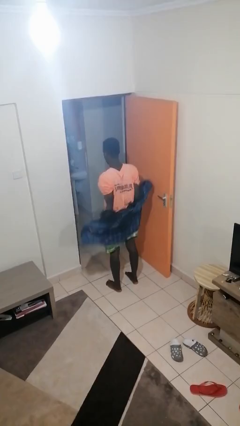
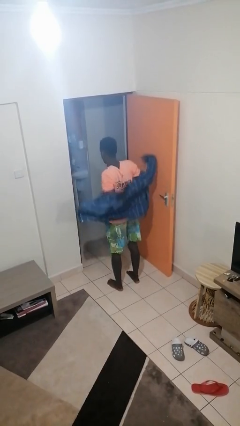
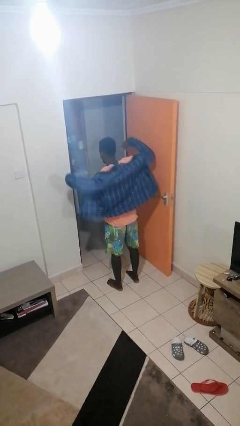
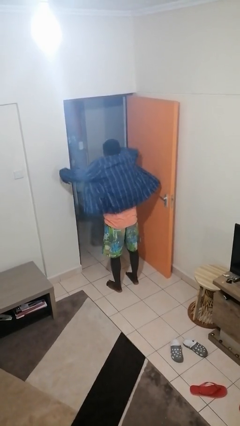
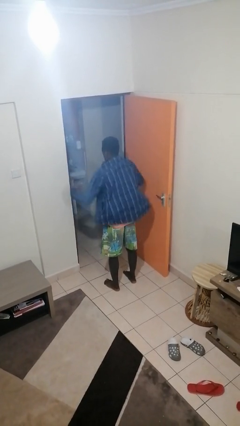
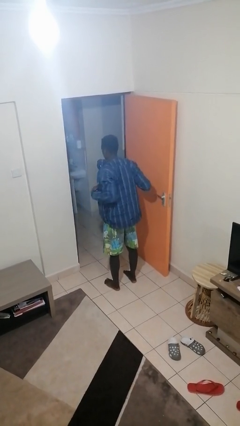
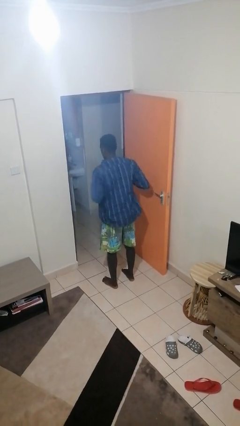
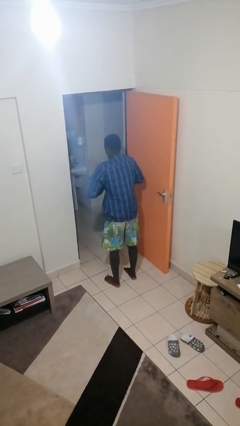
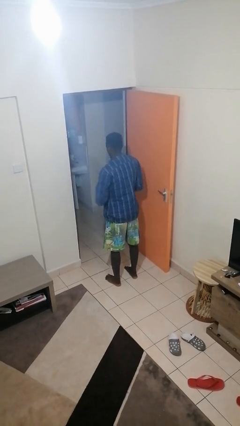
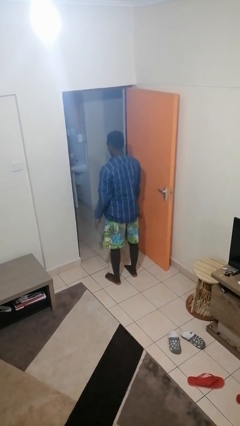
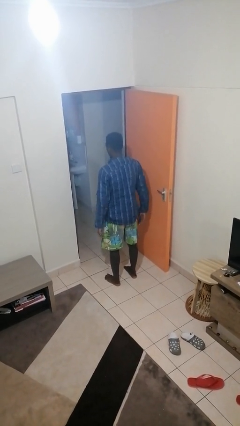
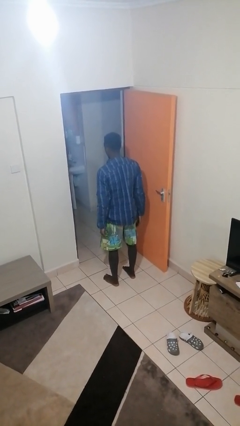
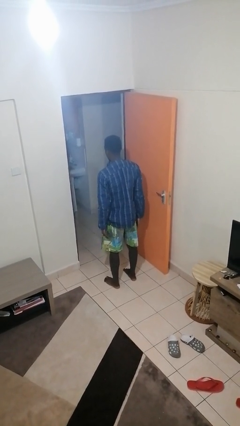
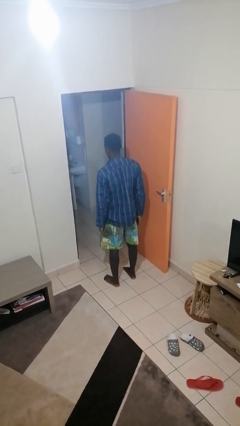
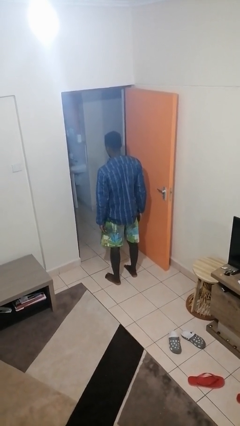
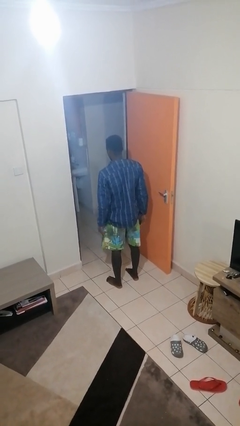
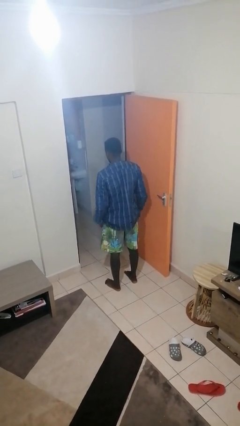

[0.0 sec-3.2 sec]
person puts on jacket

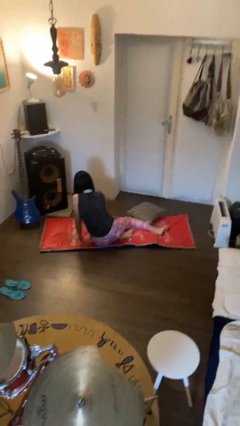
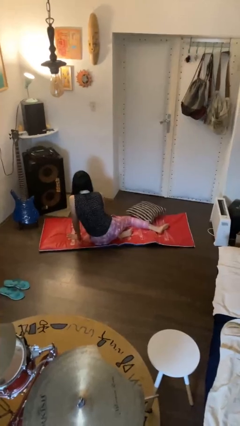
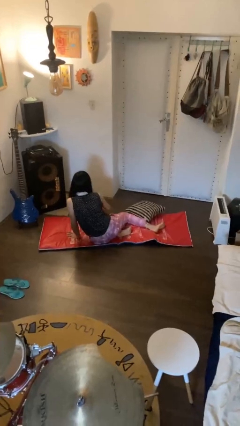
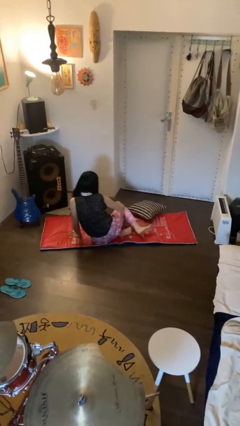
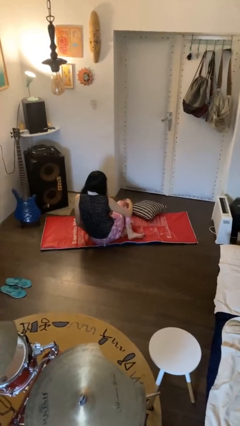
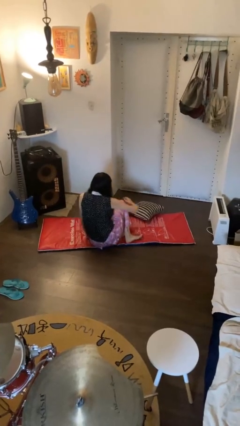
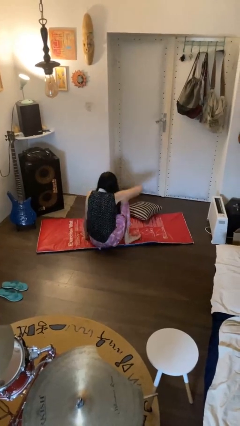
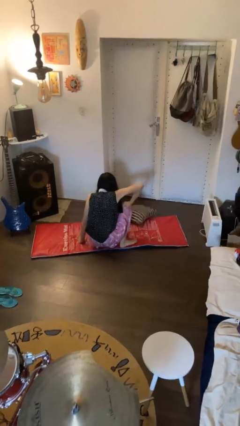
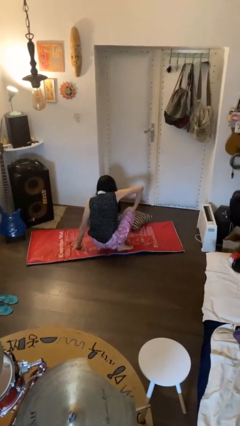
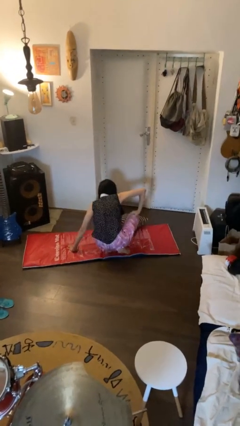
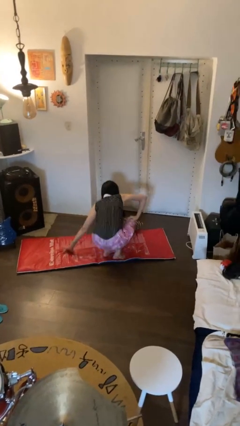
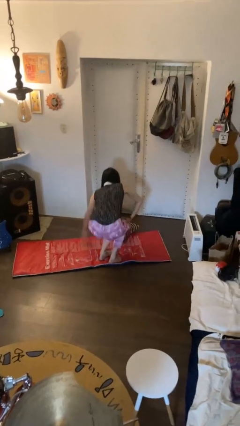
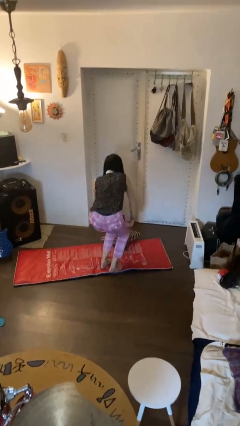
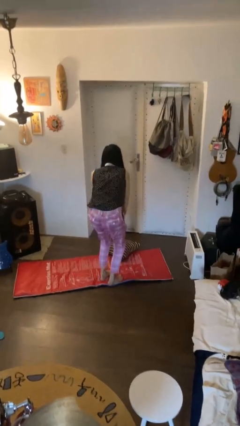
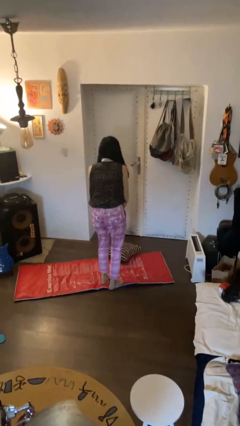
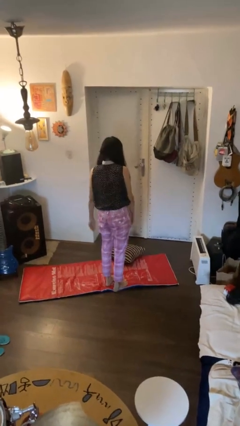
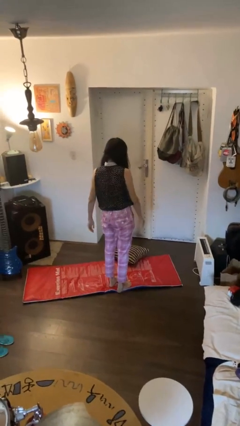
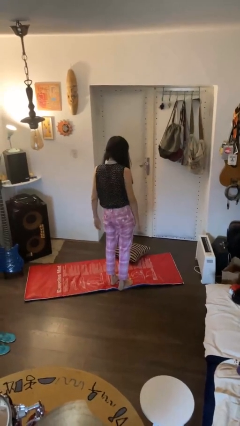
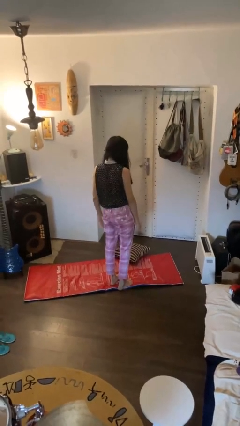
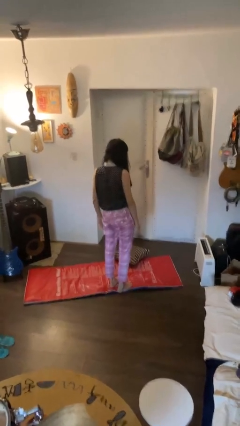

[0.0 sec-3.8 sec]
person stands up from floor

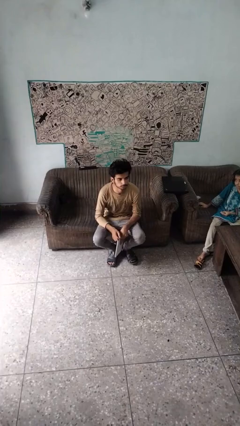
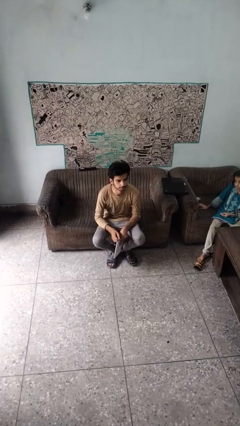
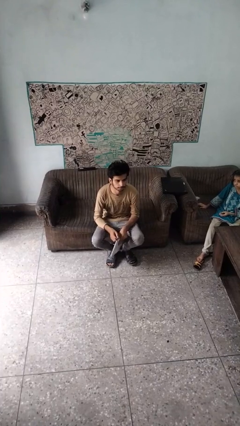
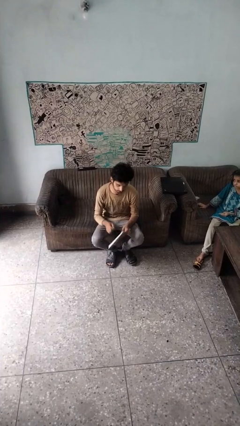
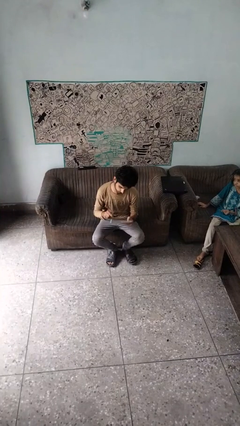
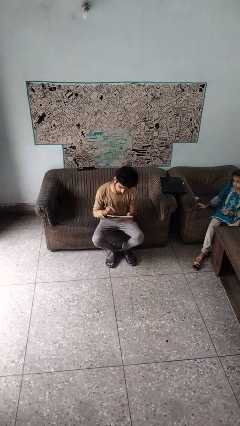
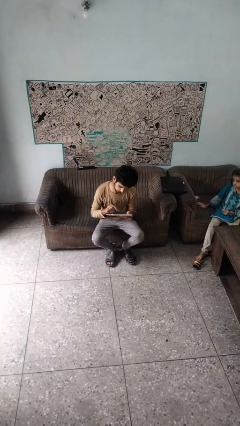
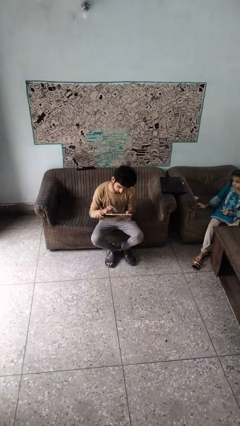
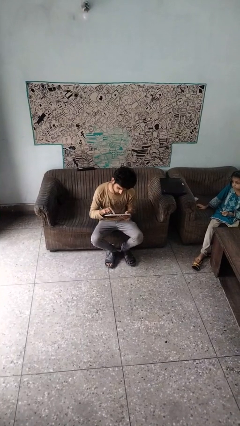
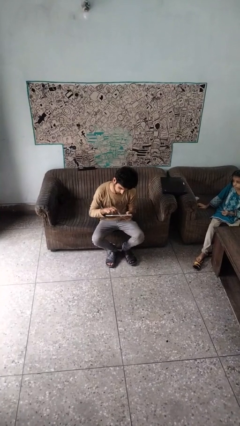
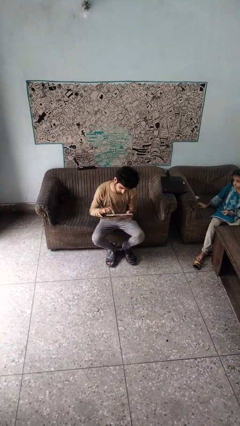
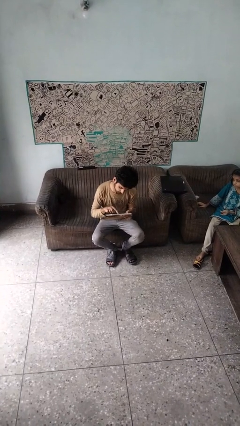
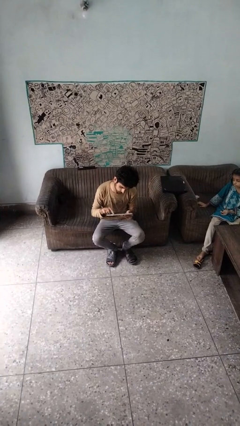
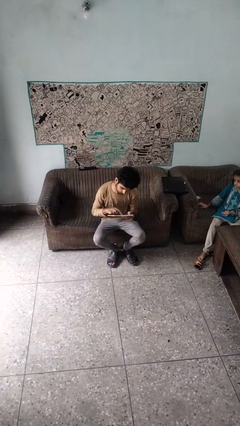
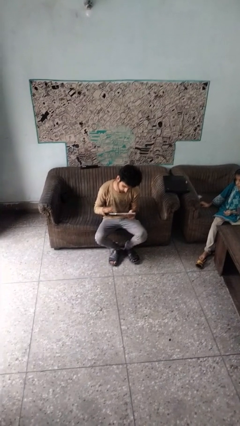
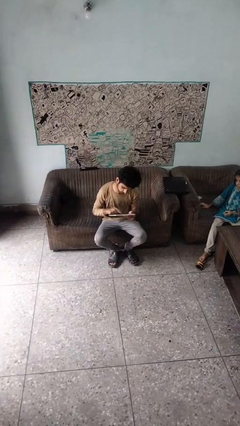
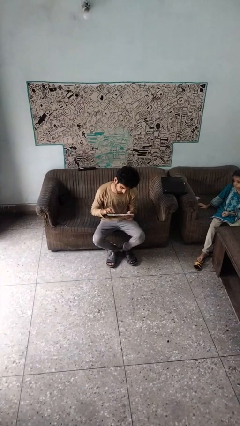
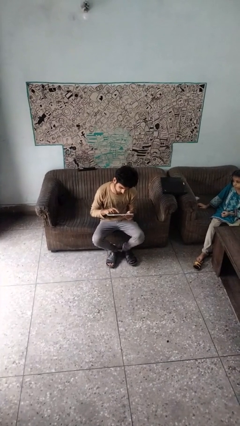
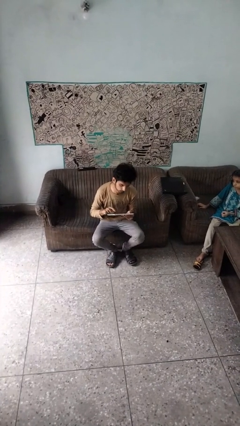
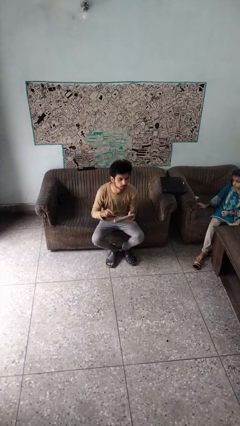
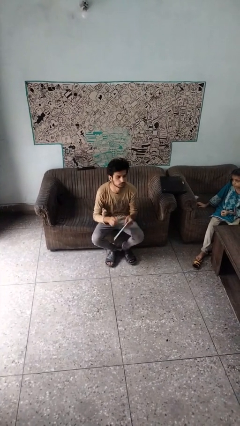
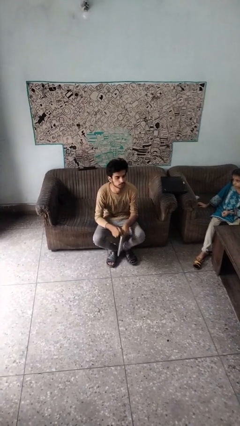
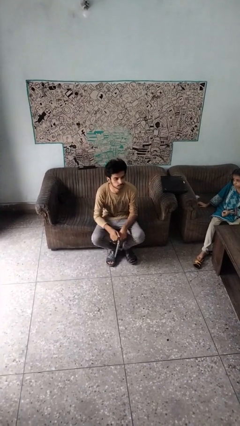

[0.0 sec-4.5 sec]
person interacts with tablet

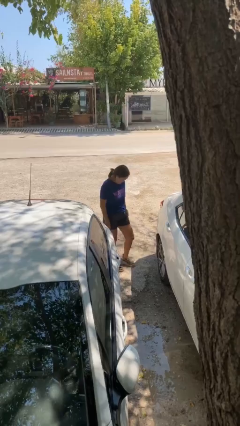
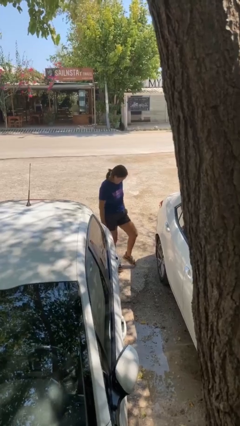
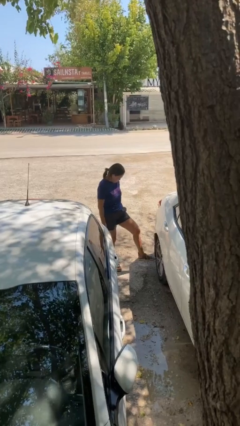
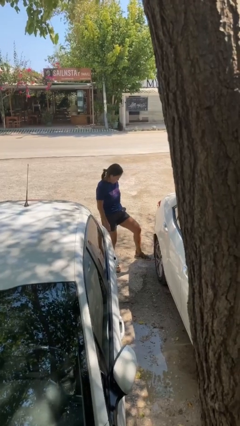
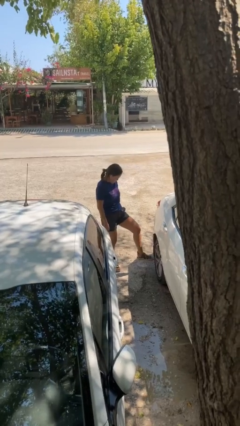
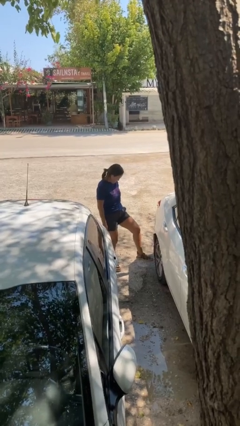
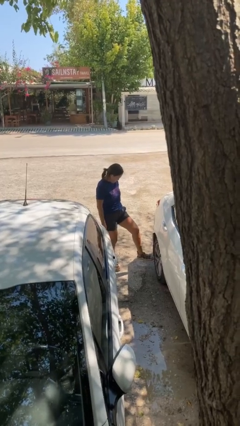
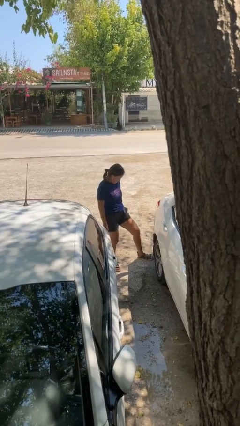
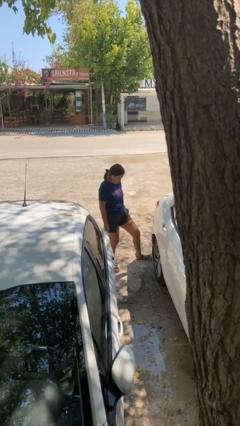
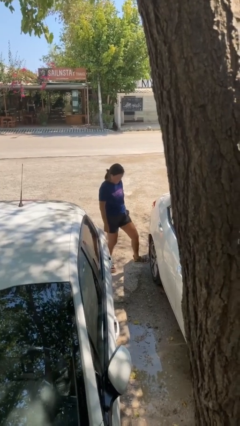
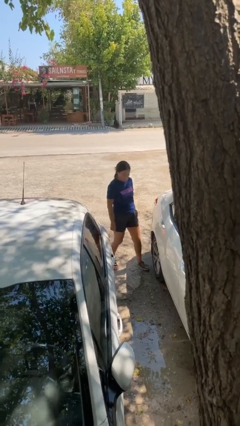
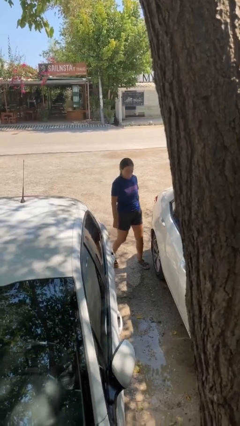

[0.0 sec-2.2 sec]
person kicks car tires

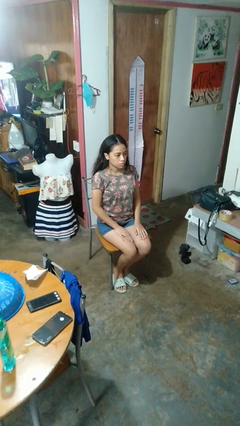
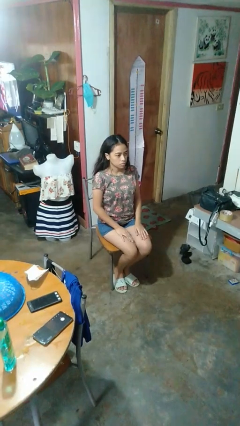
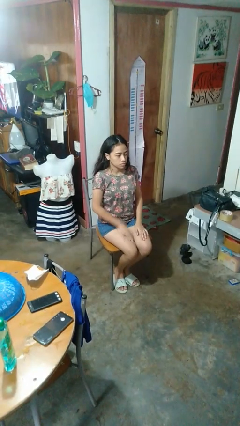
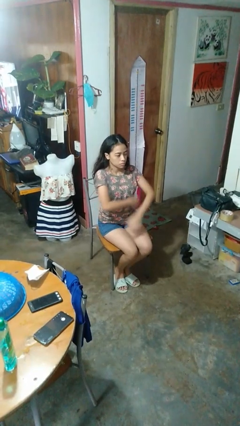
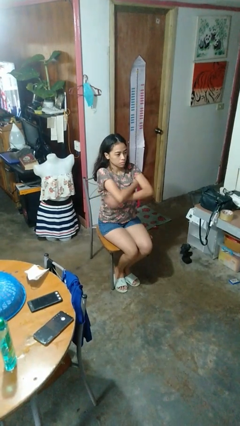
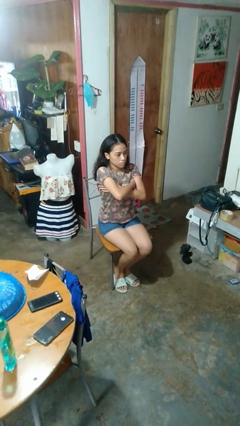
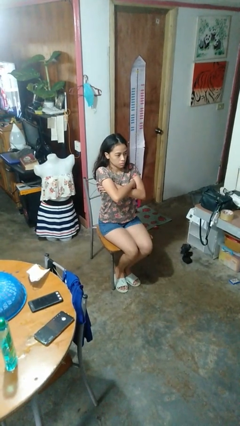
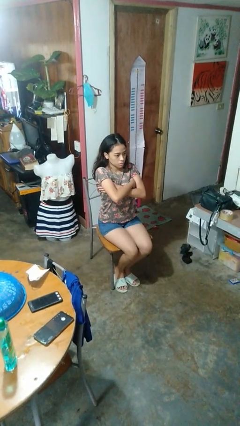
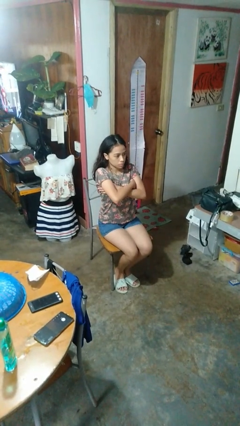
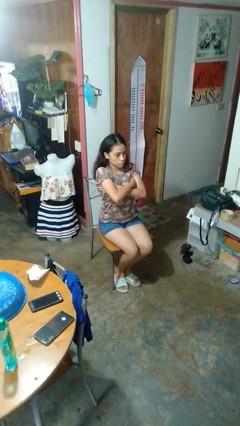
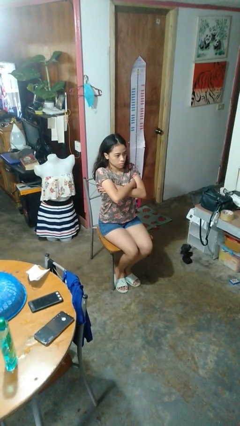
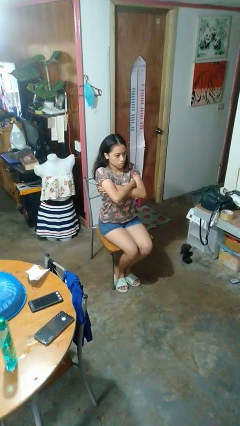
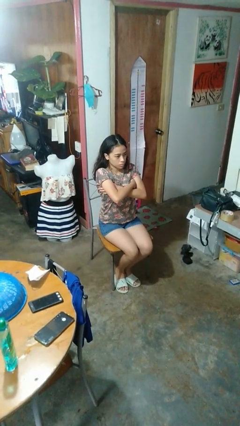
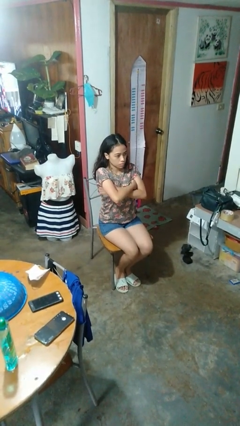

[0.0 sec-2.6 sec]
person crosses arms

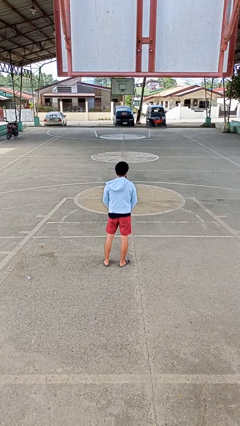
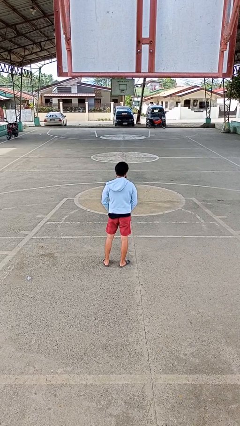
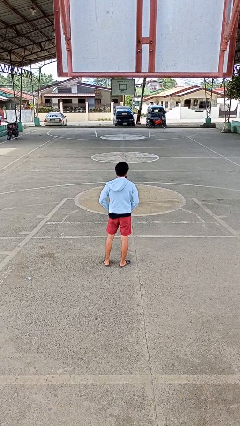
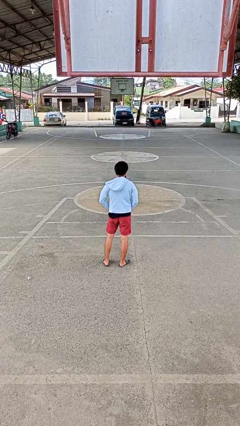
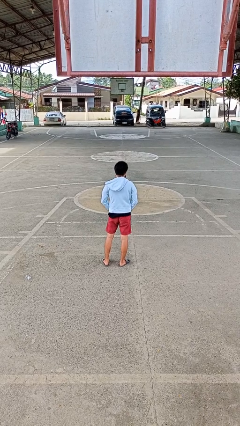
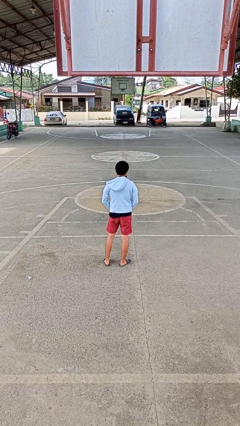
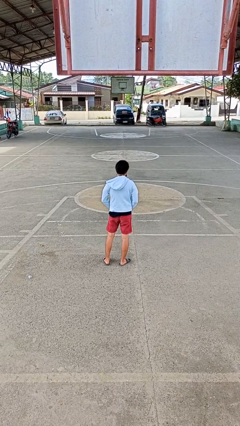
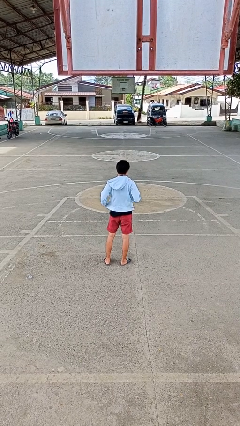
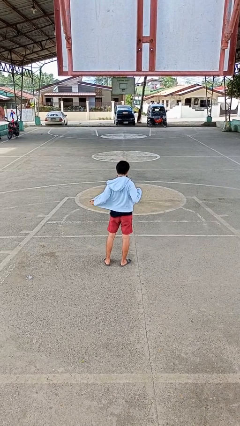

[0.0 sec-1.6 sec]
person unzips jacket
